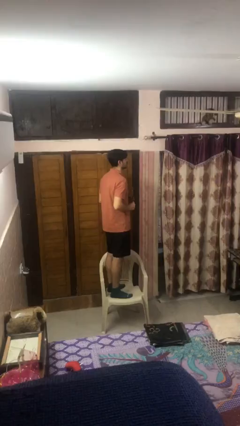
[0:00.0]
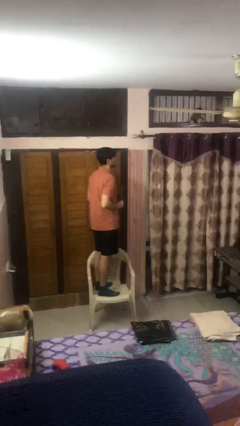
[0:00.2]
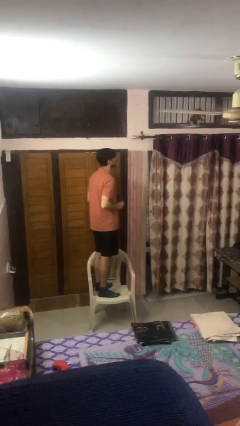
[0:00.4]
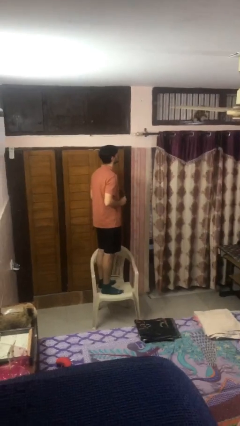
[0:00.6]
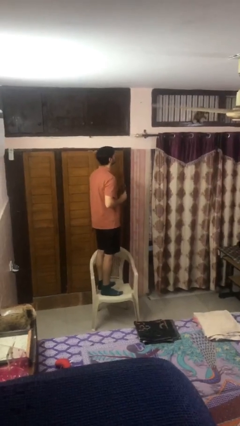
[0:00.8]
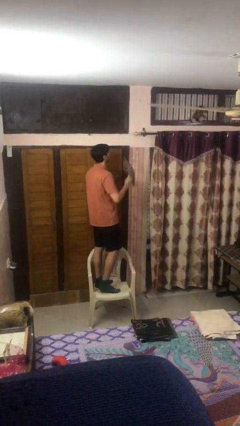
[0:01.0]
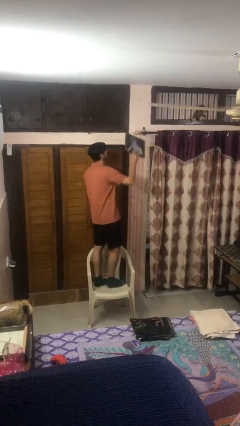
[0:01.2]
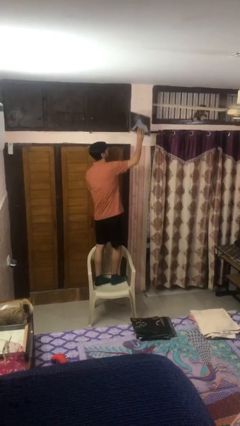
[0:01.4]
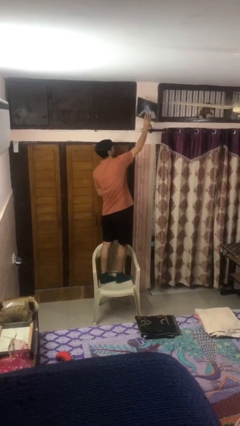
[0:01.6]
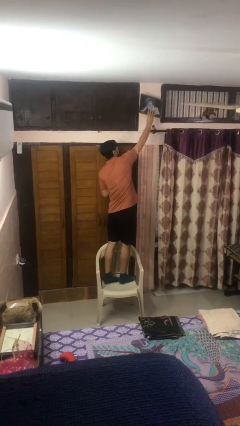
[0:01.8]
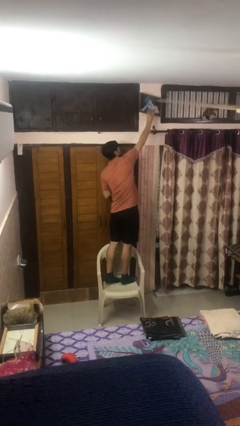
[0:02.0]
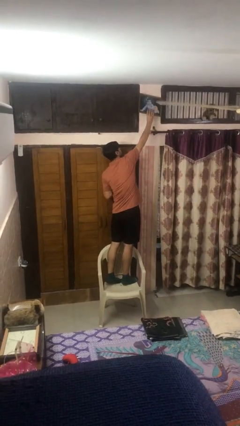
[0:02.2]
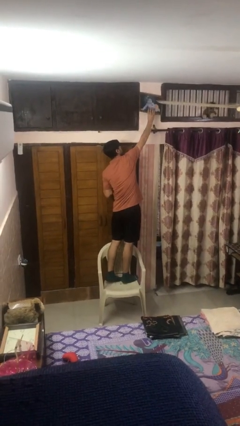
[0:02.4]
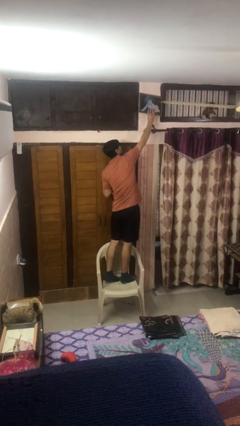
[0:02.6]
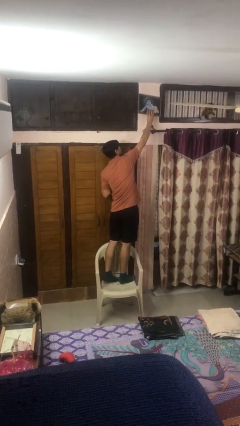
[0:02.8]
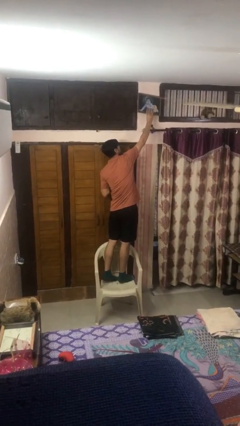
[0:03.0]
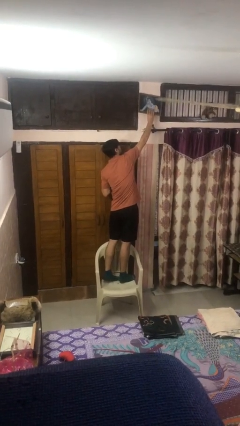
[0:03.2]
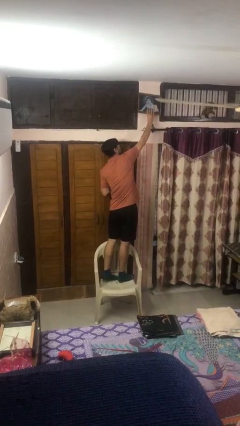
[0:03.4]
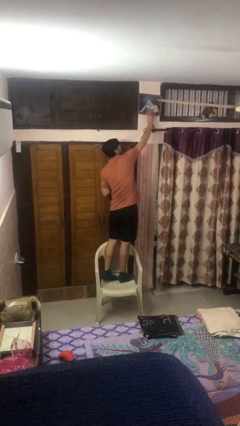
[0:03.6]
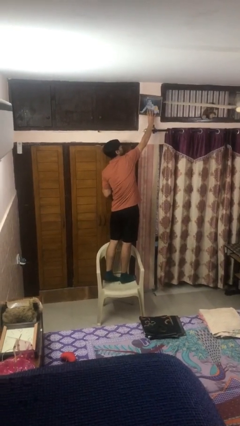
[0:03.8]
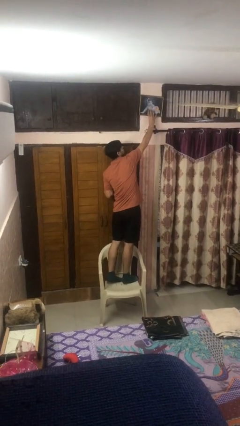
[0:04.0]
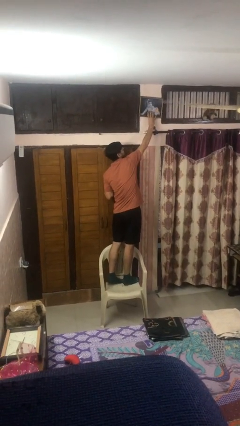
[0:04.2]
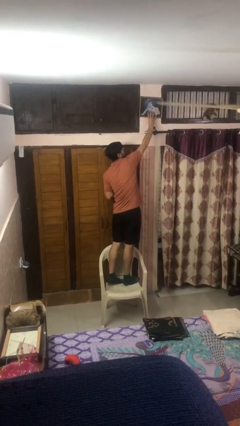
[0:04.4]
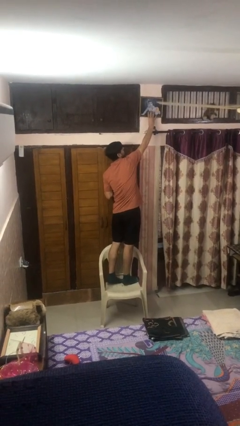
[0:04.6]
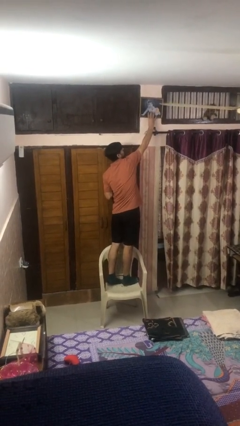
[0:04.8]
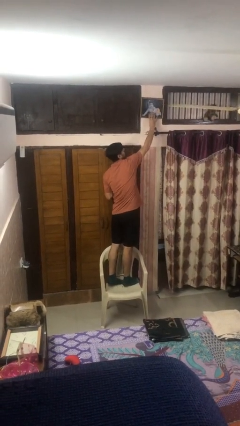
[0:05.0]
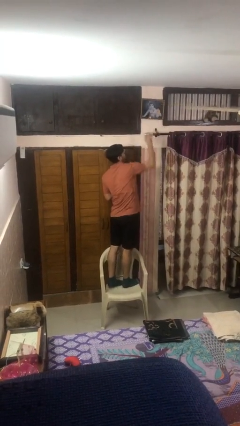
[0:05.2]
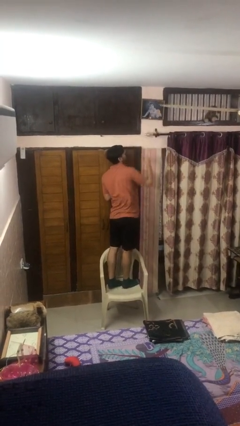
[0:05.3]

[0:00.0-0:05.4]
person puts up picture frame

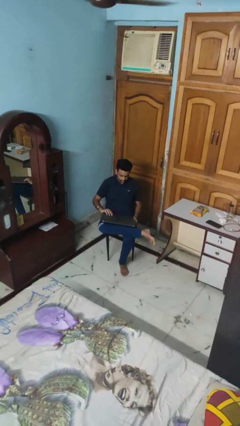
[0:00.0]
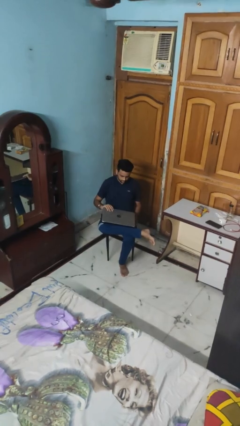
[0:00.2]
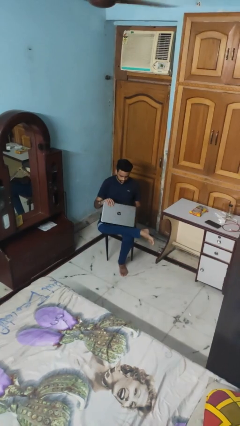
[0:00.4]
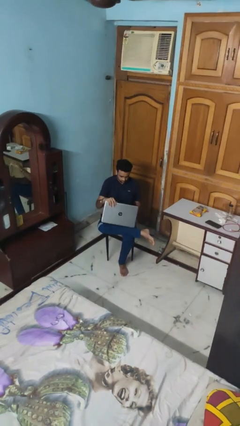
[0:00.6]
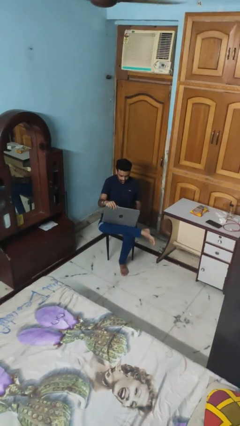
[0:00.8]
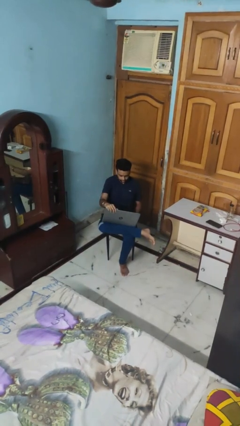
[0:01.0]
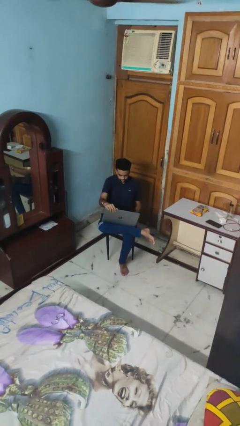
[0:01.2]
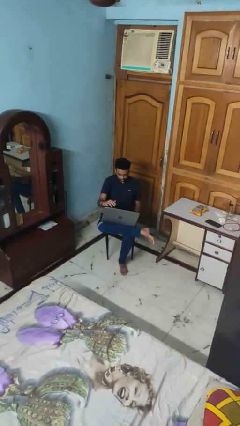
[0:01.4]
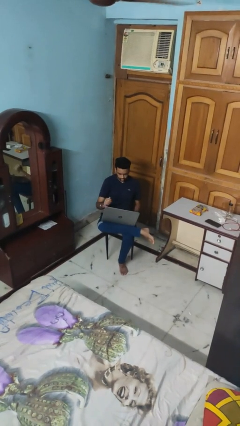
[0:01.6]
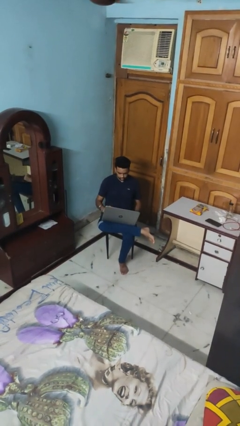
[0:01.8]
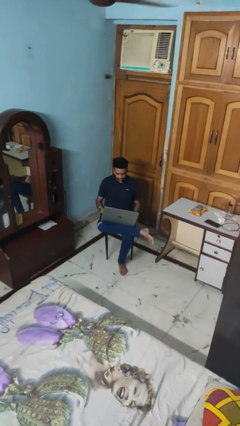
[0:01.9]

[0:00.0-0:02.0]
person opens laptop

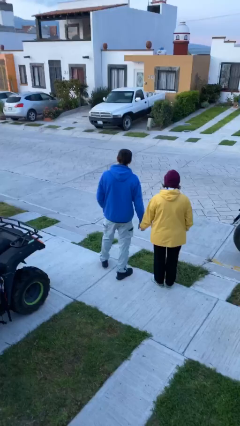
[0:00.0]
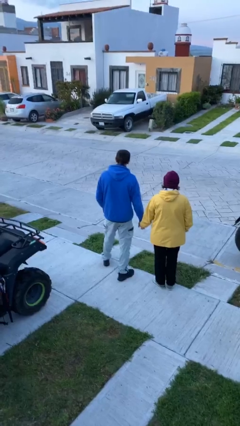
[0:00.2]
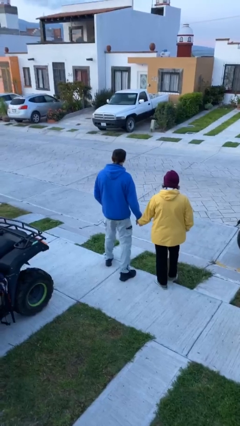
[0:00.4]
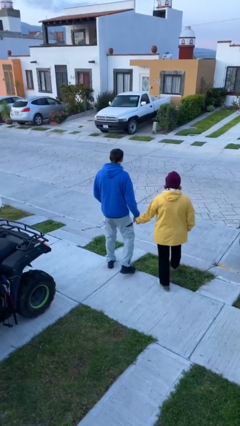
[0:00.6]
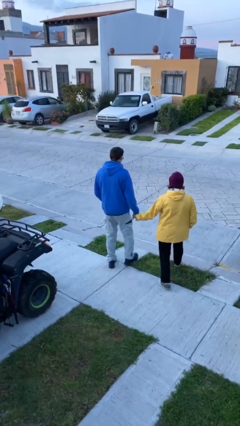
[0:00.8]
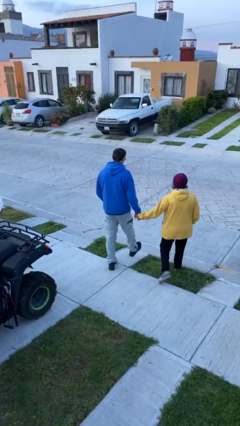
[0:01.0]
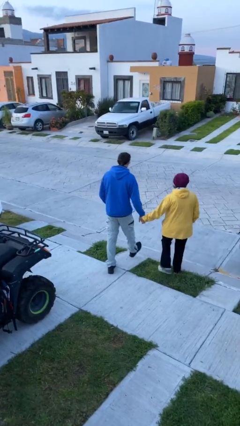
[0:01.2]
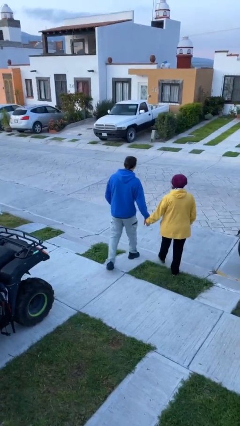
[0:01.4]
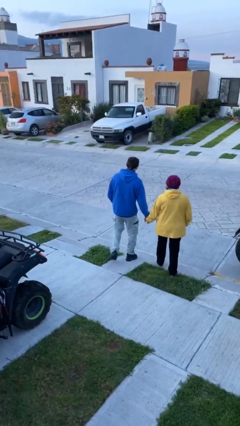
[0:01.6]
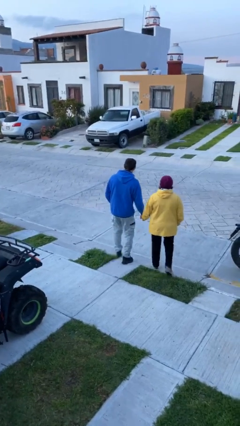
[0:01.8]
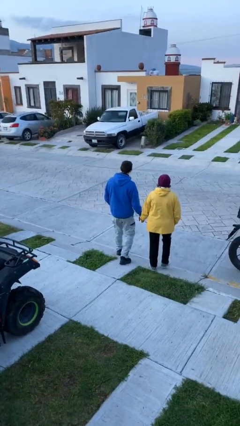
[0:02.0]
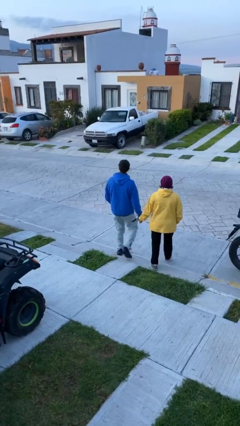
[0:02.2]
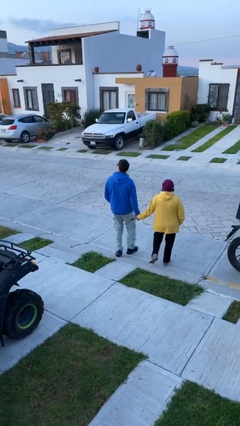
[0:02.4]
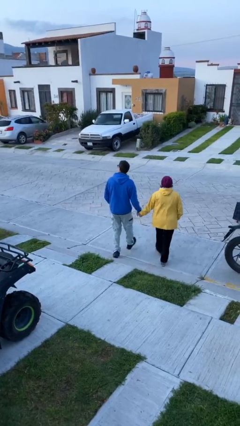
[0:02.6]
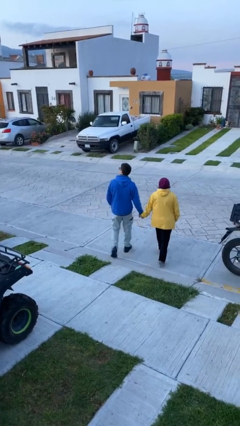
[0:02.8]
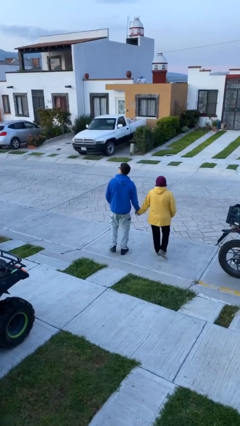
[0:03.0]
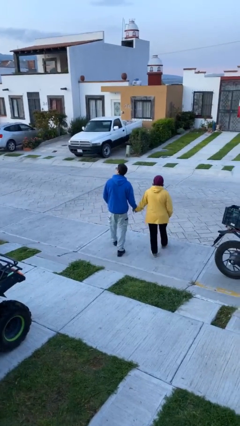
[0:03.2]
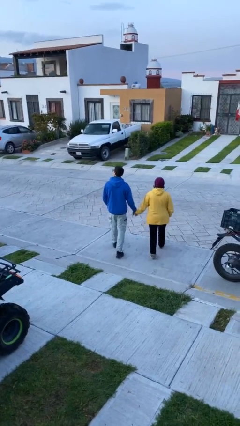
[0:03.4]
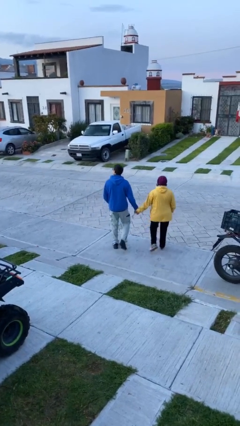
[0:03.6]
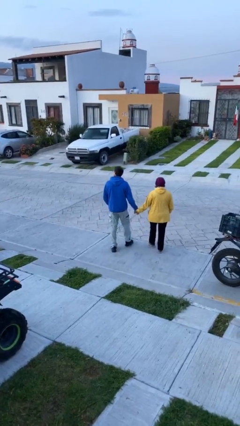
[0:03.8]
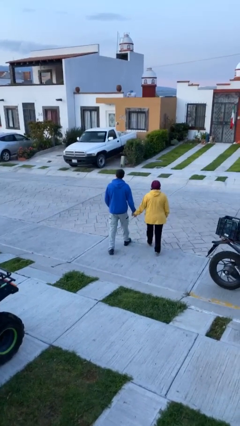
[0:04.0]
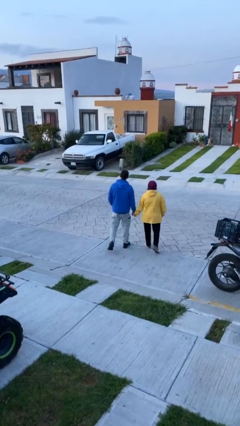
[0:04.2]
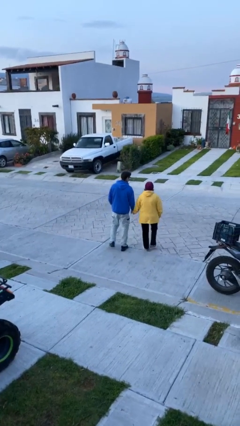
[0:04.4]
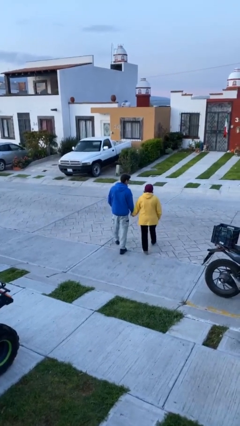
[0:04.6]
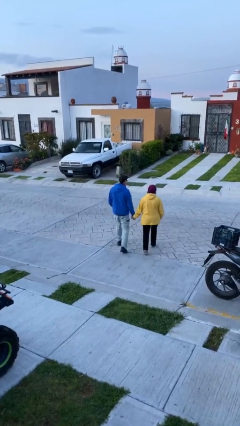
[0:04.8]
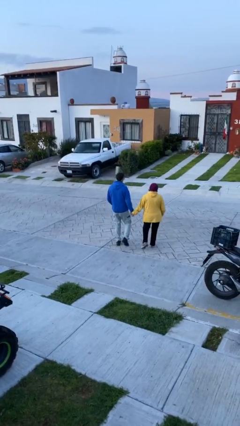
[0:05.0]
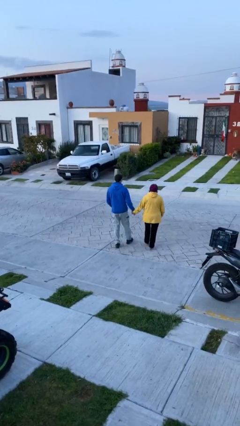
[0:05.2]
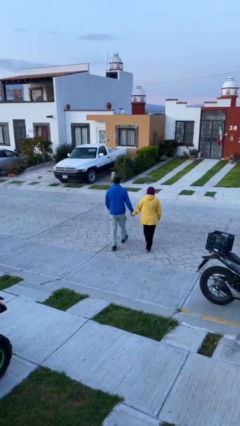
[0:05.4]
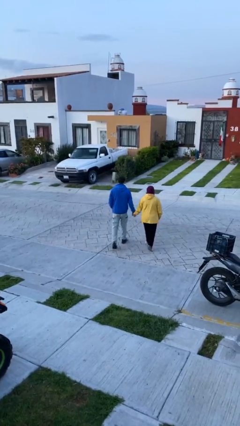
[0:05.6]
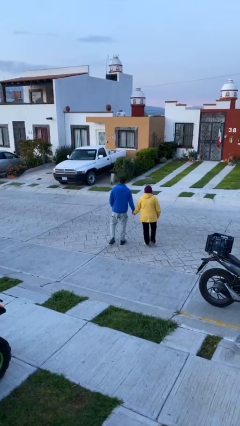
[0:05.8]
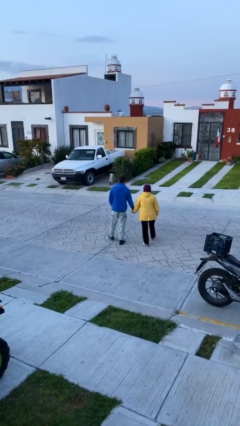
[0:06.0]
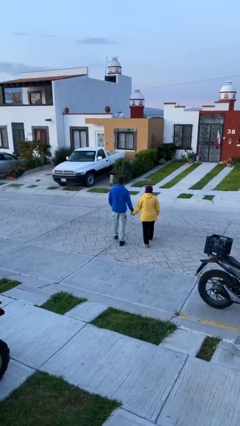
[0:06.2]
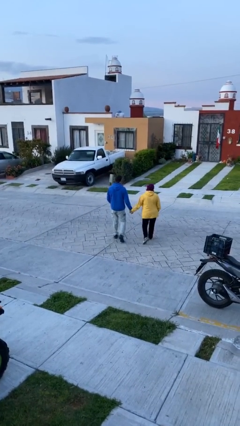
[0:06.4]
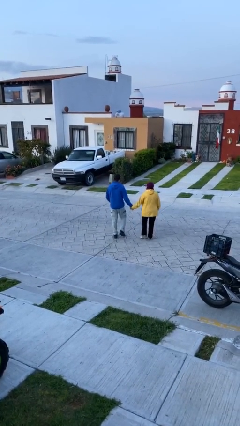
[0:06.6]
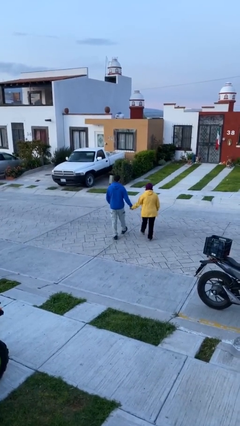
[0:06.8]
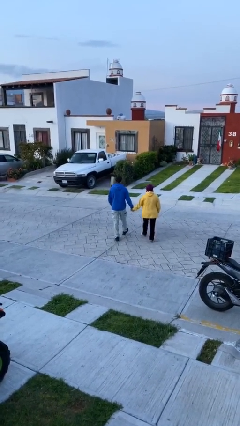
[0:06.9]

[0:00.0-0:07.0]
person holds hand

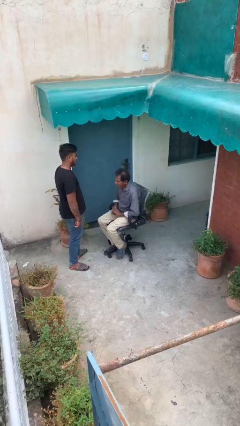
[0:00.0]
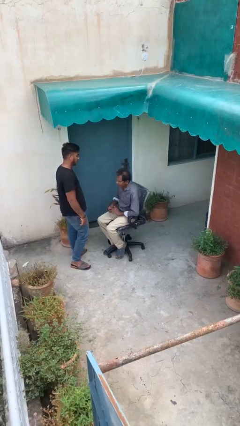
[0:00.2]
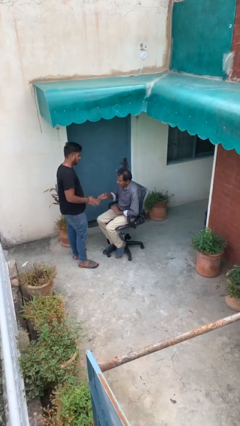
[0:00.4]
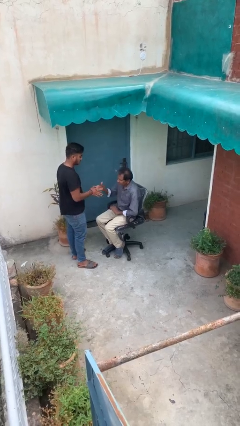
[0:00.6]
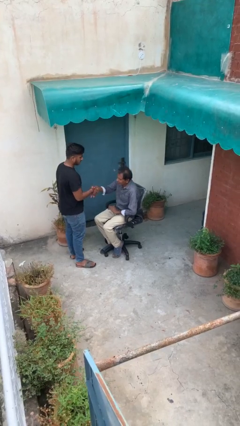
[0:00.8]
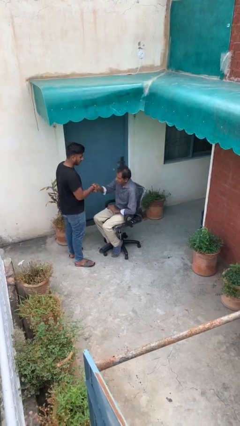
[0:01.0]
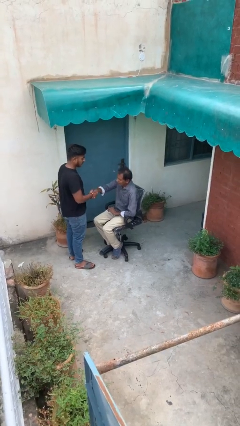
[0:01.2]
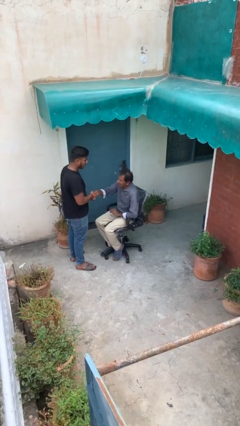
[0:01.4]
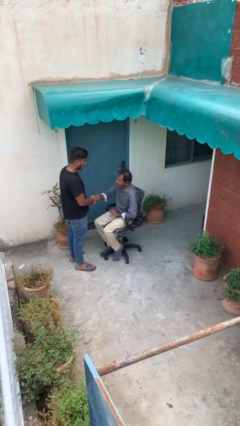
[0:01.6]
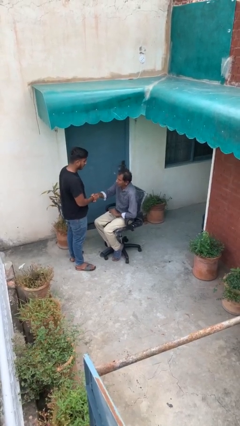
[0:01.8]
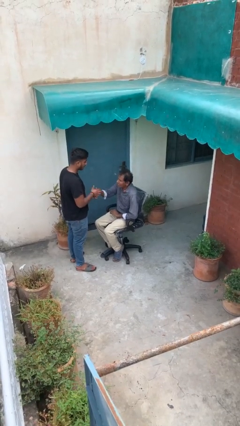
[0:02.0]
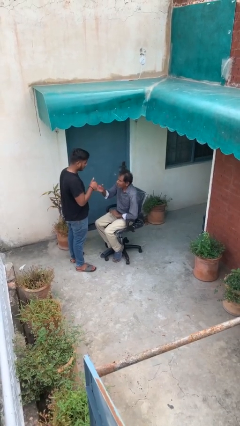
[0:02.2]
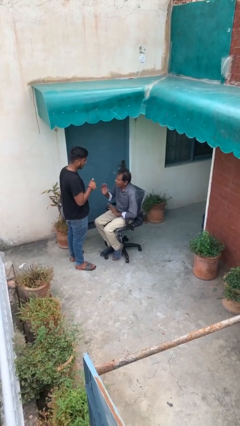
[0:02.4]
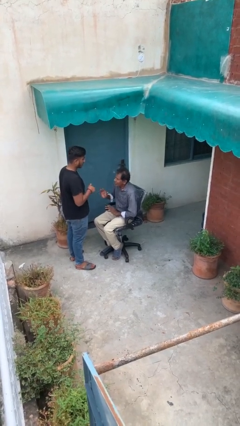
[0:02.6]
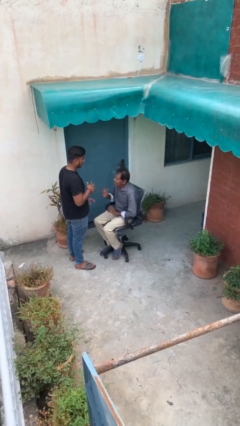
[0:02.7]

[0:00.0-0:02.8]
person shakes hand

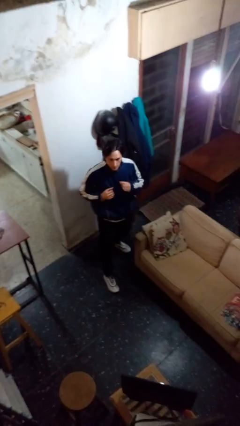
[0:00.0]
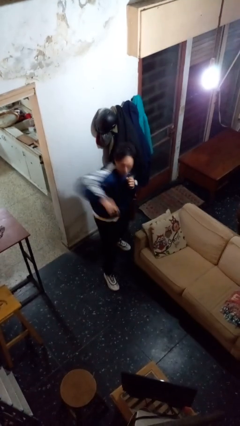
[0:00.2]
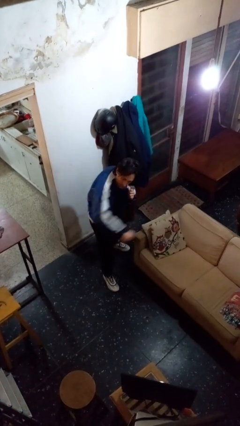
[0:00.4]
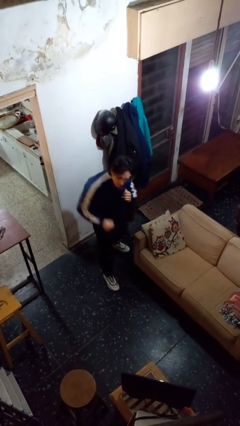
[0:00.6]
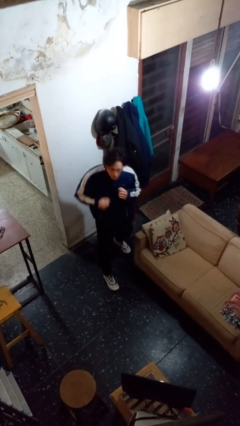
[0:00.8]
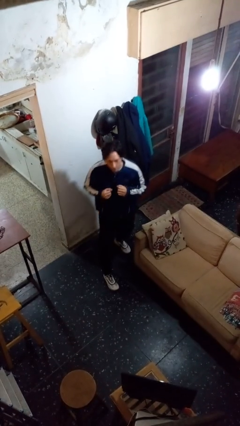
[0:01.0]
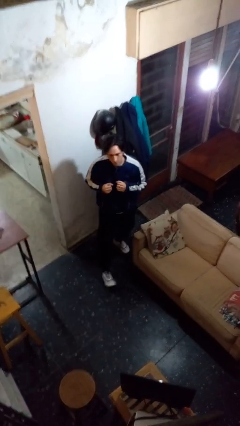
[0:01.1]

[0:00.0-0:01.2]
person karate chop
